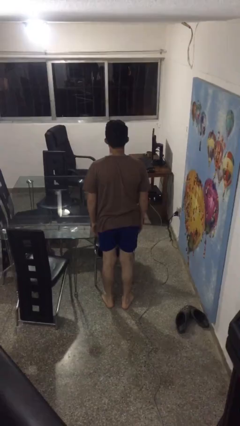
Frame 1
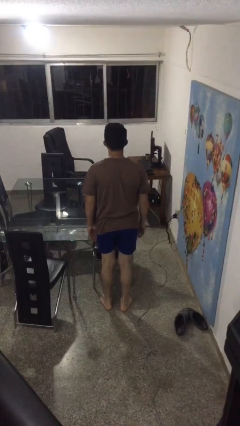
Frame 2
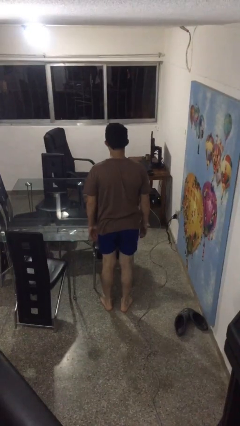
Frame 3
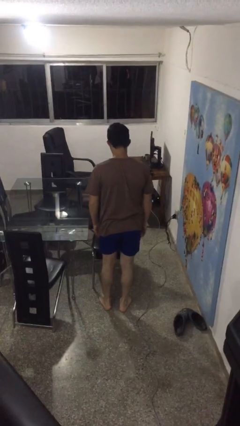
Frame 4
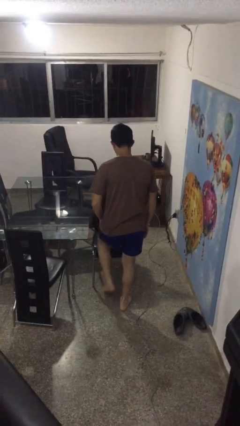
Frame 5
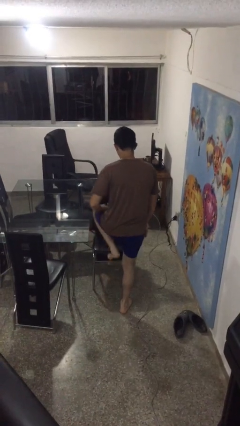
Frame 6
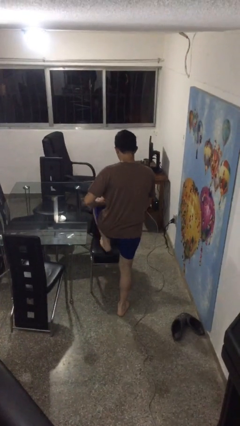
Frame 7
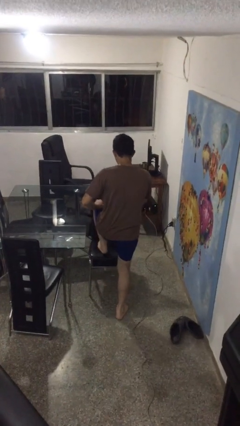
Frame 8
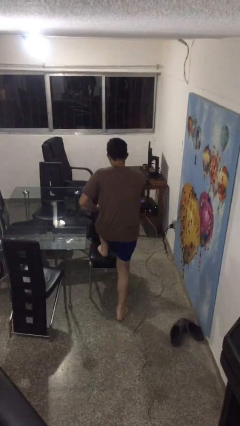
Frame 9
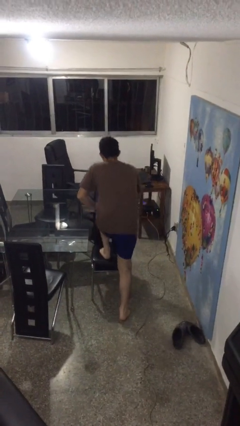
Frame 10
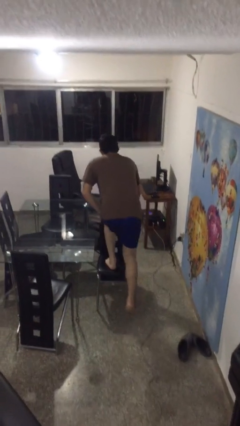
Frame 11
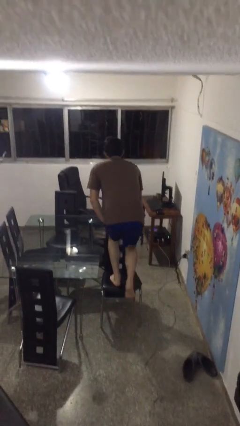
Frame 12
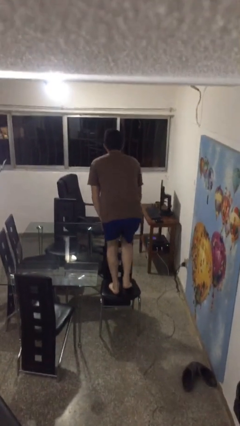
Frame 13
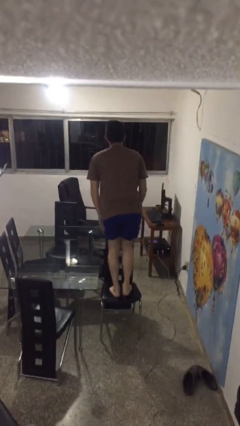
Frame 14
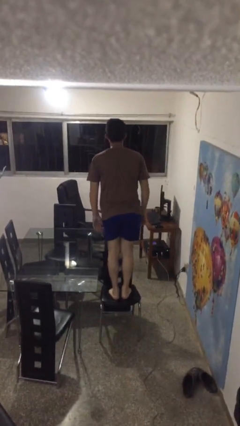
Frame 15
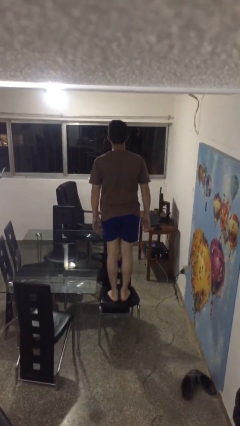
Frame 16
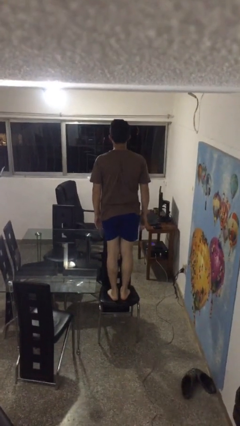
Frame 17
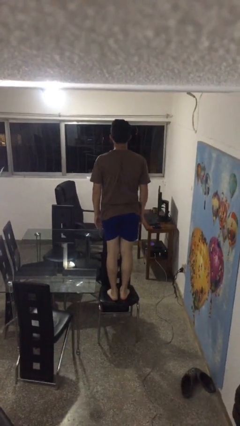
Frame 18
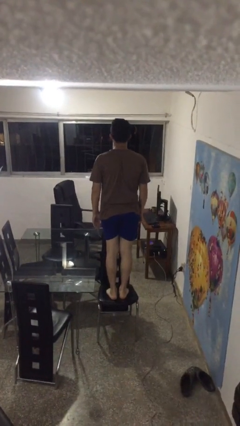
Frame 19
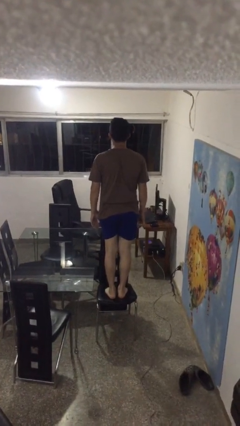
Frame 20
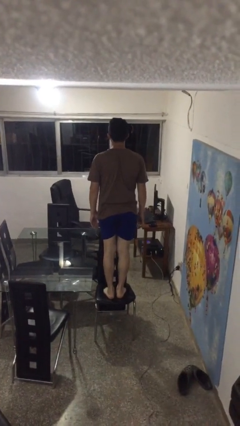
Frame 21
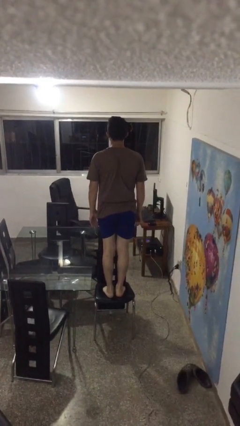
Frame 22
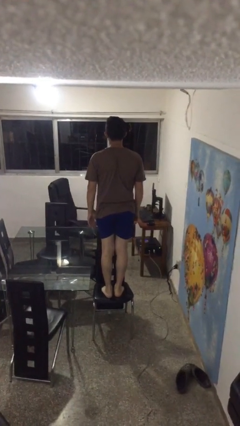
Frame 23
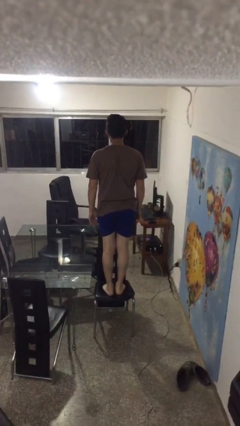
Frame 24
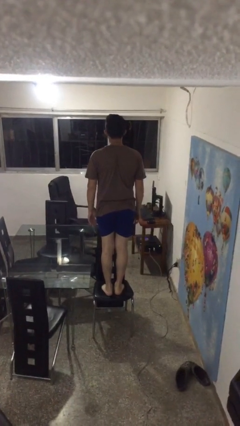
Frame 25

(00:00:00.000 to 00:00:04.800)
person climbs on chair

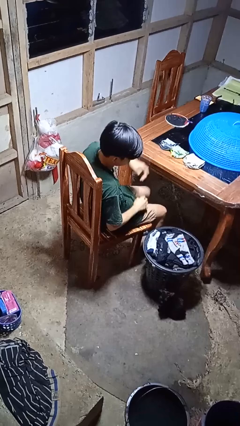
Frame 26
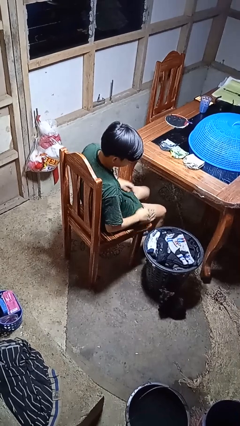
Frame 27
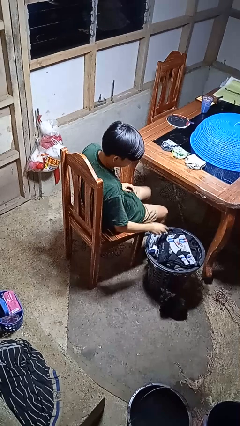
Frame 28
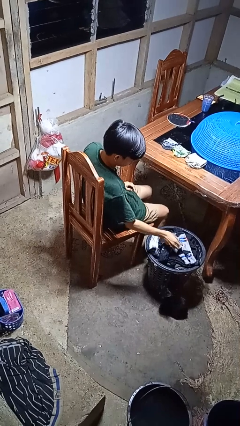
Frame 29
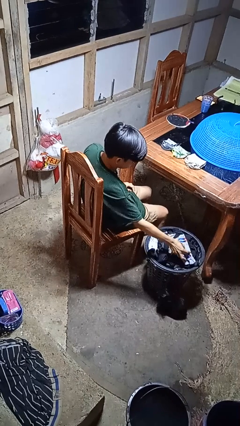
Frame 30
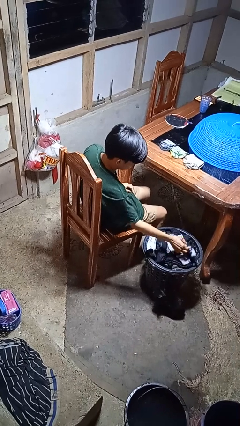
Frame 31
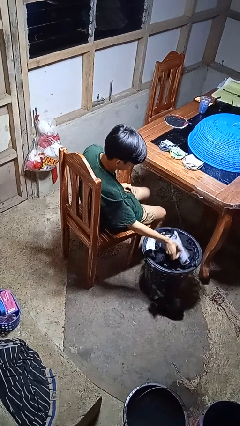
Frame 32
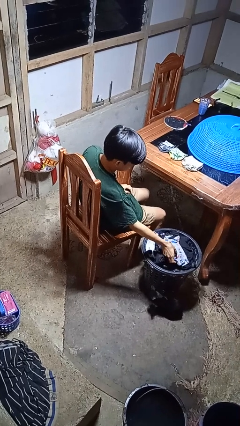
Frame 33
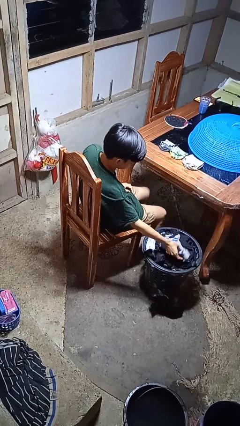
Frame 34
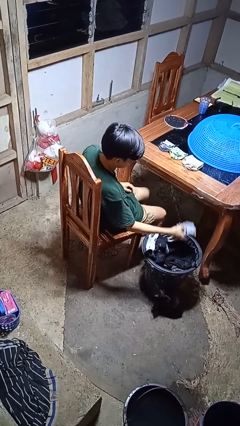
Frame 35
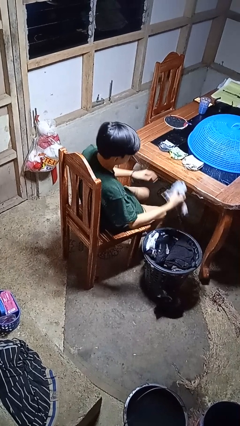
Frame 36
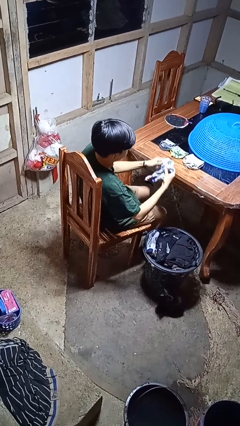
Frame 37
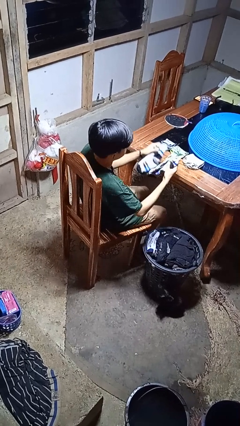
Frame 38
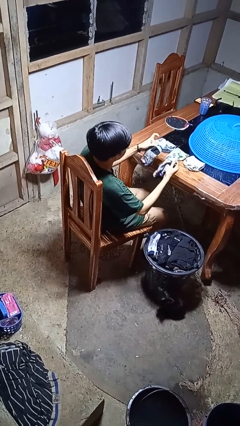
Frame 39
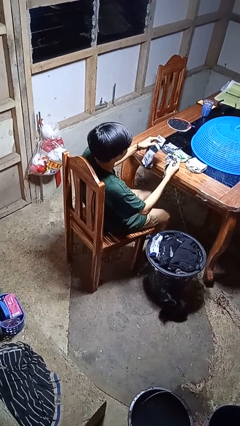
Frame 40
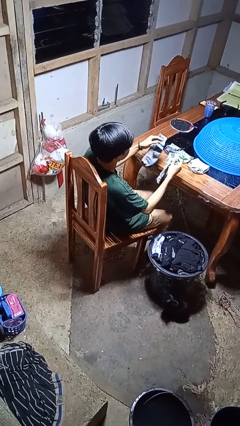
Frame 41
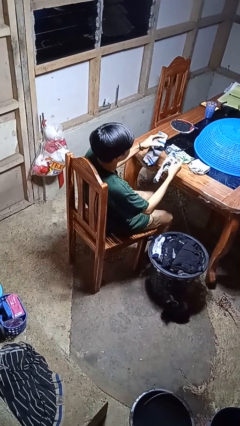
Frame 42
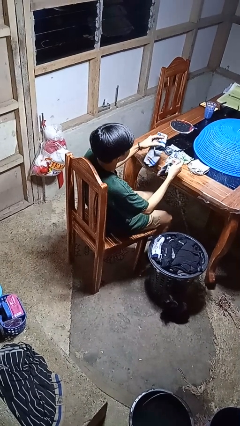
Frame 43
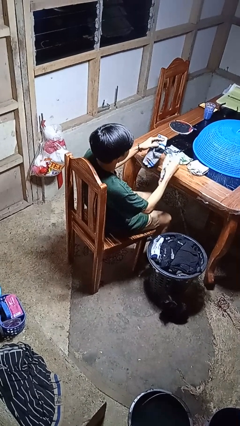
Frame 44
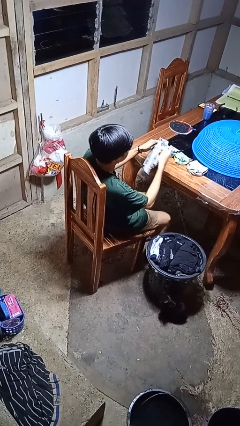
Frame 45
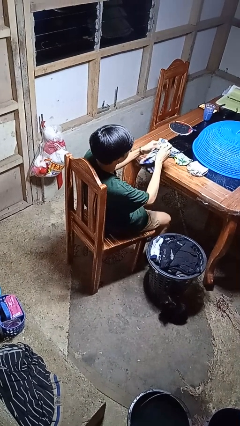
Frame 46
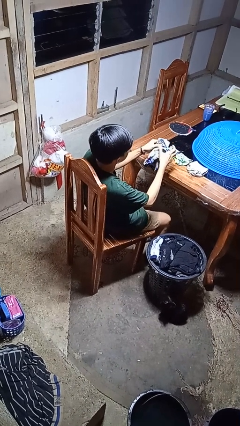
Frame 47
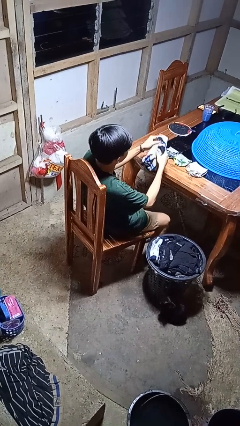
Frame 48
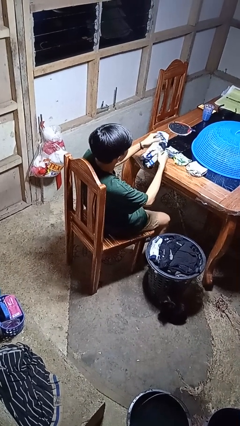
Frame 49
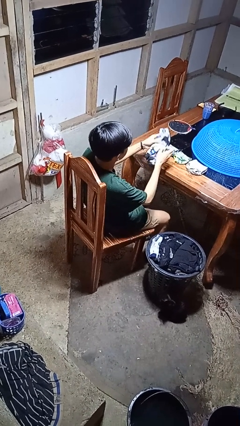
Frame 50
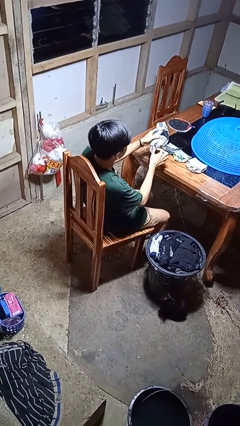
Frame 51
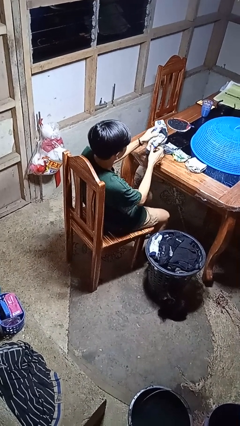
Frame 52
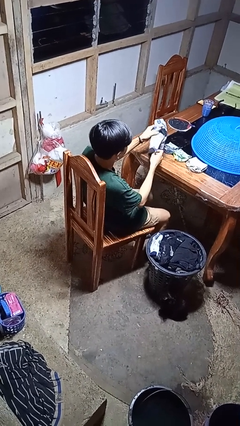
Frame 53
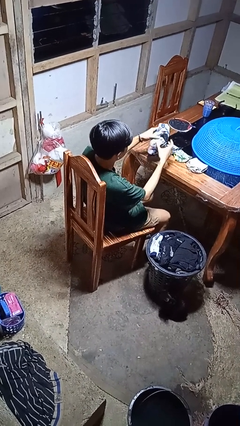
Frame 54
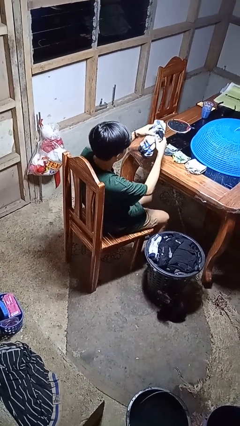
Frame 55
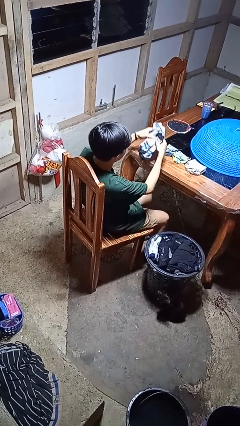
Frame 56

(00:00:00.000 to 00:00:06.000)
person folds socks

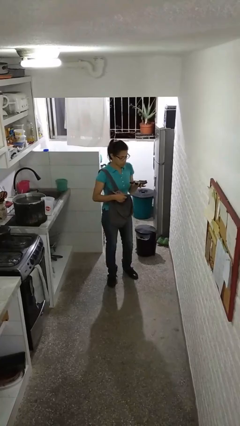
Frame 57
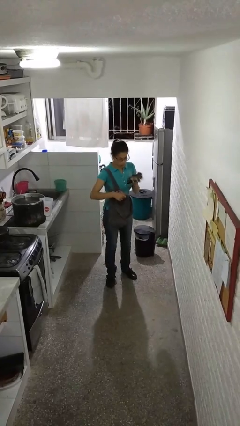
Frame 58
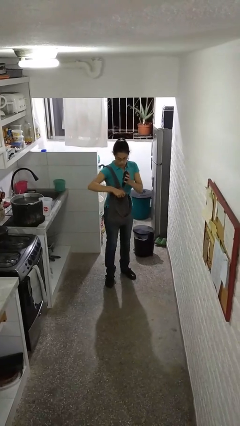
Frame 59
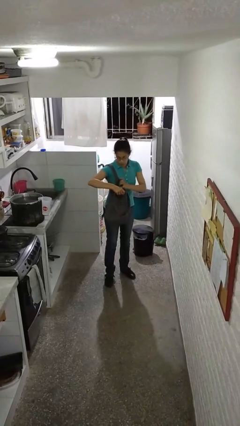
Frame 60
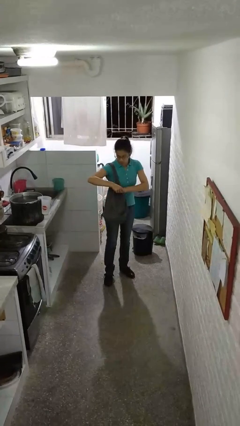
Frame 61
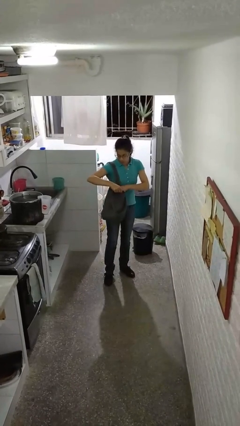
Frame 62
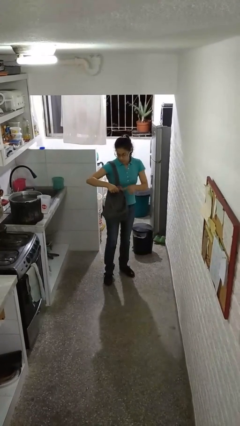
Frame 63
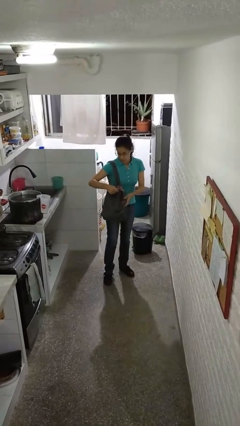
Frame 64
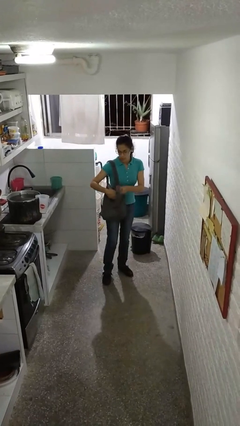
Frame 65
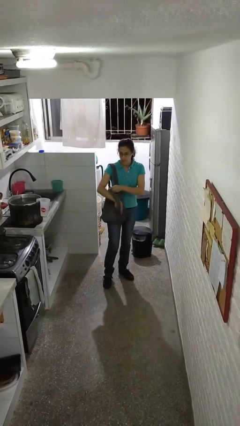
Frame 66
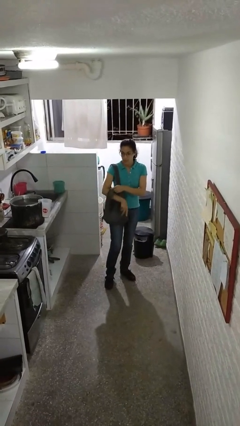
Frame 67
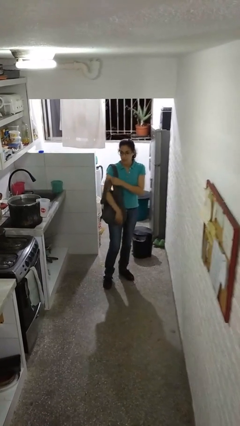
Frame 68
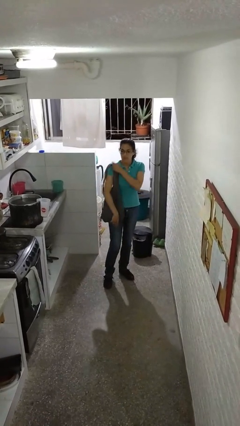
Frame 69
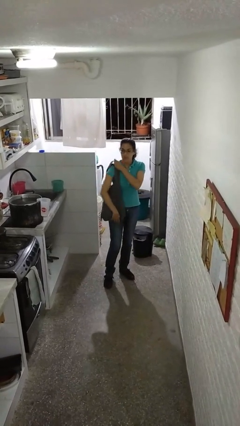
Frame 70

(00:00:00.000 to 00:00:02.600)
person puts object into purse

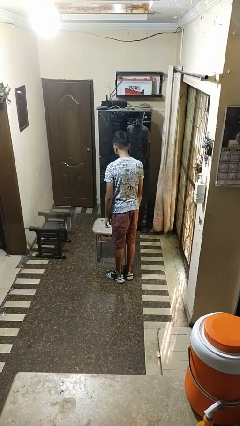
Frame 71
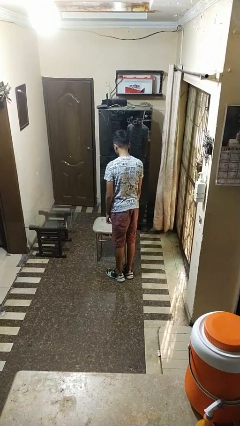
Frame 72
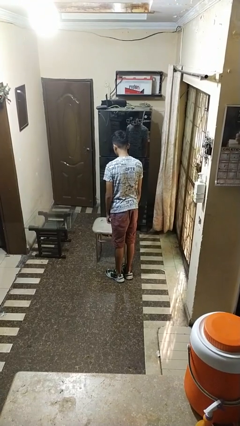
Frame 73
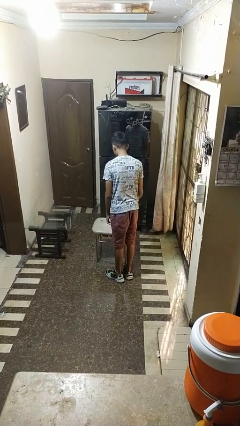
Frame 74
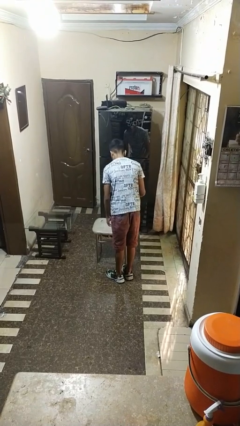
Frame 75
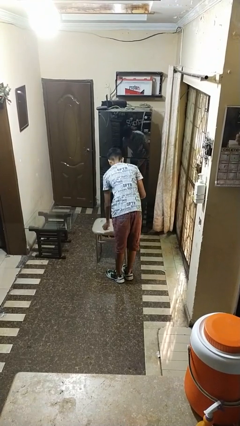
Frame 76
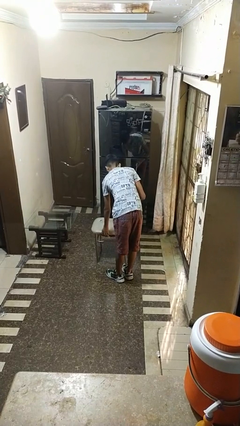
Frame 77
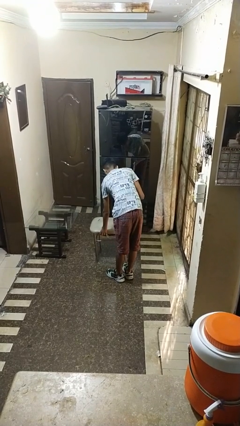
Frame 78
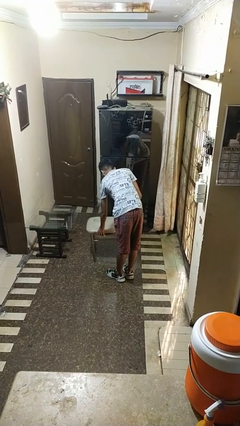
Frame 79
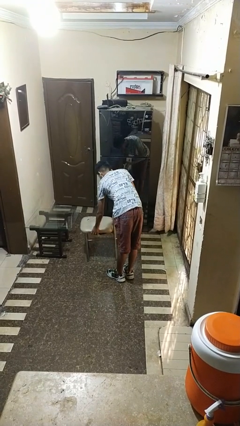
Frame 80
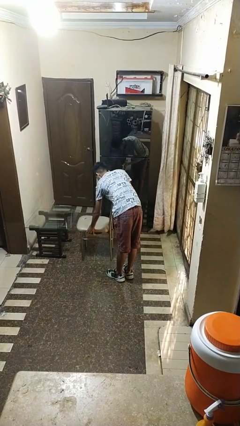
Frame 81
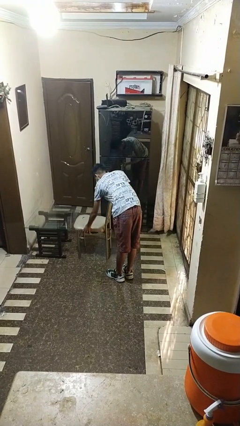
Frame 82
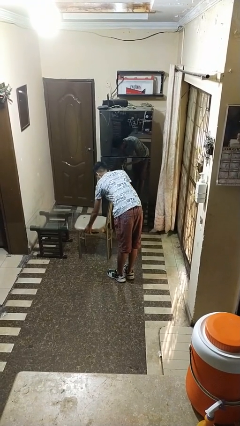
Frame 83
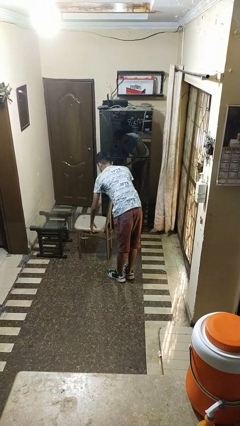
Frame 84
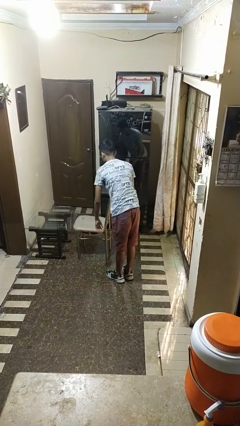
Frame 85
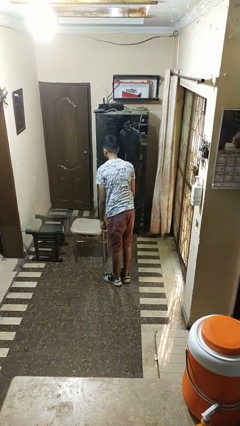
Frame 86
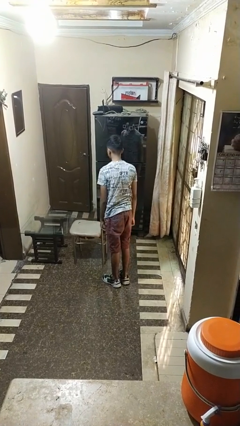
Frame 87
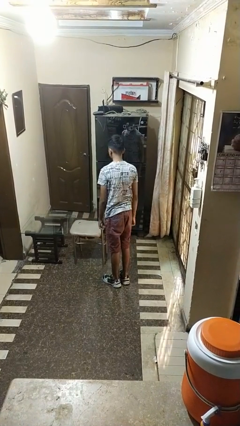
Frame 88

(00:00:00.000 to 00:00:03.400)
person pushes in chair

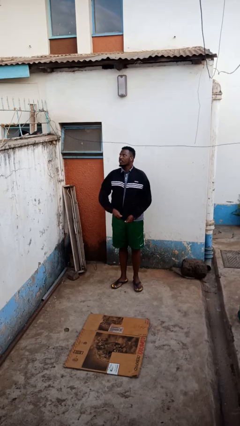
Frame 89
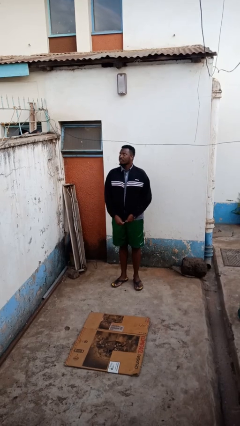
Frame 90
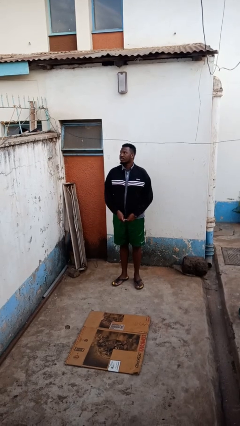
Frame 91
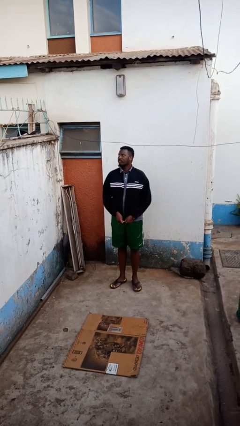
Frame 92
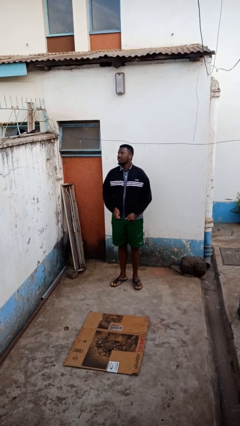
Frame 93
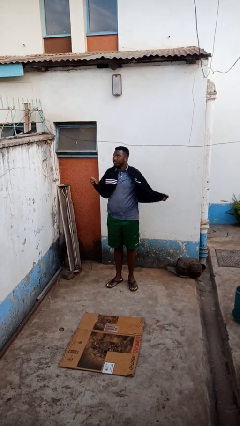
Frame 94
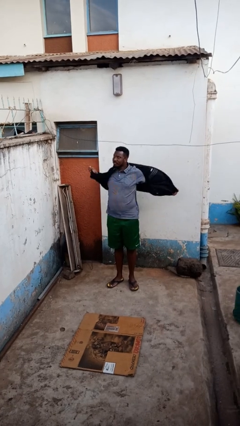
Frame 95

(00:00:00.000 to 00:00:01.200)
person unzips jacket
